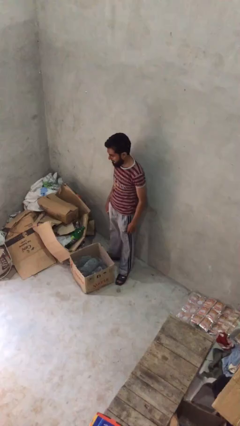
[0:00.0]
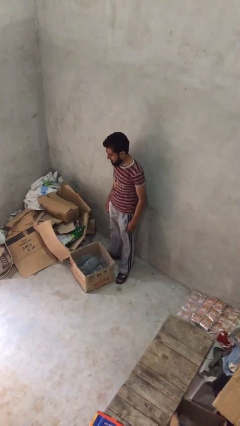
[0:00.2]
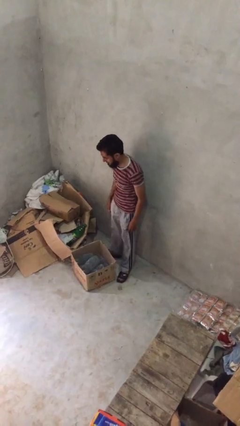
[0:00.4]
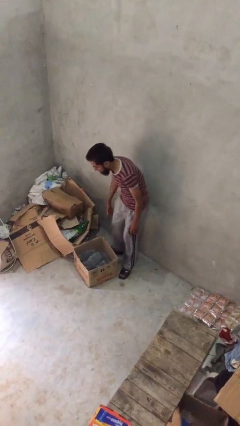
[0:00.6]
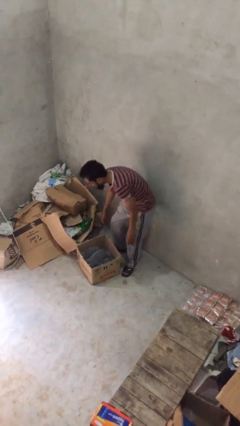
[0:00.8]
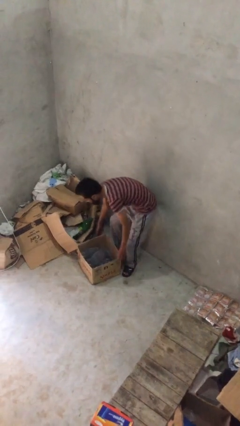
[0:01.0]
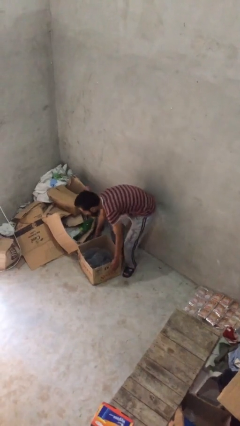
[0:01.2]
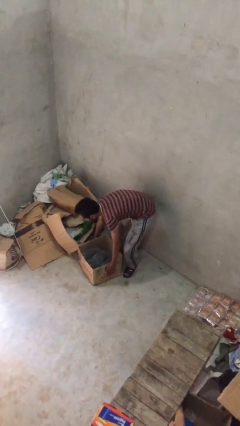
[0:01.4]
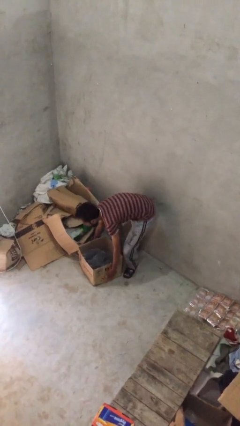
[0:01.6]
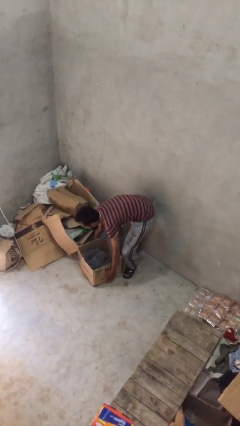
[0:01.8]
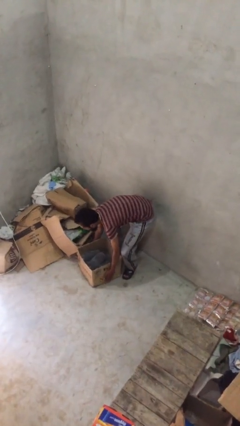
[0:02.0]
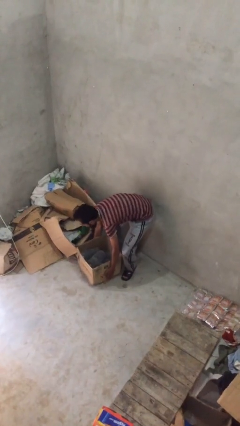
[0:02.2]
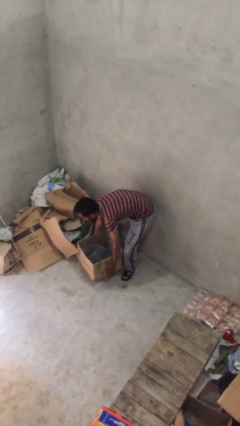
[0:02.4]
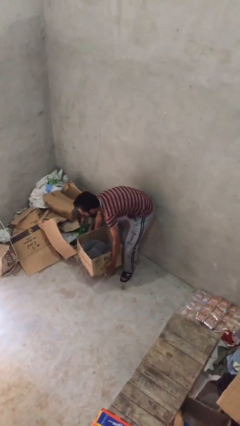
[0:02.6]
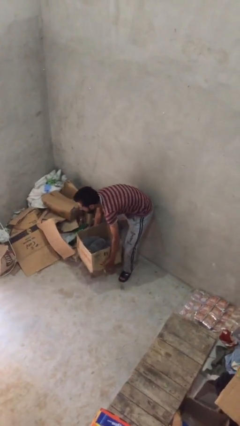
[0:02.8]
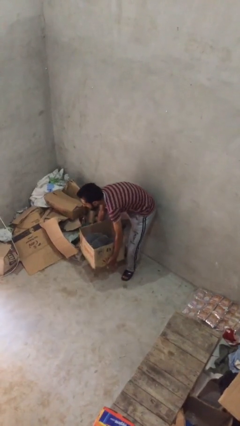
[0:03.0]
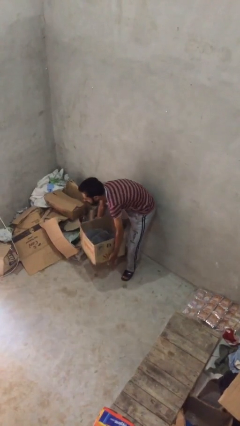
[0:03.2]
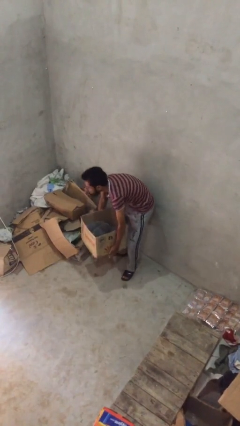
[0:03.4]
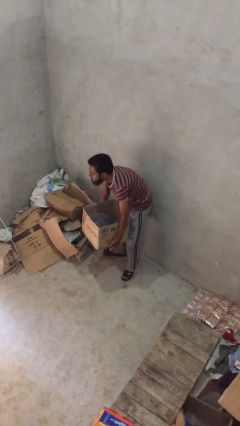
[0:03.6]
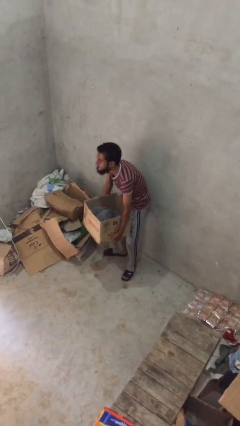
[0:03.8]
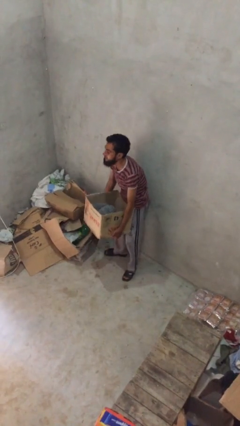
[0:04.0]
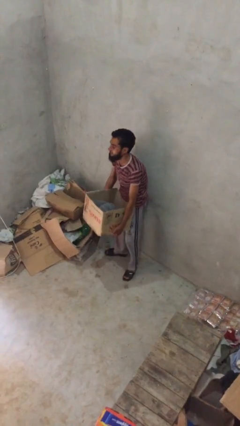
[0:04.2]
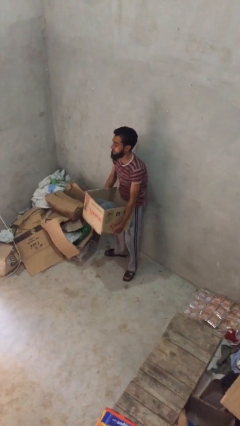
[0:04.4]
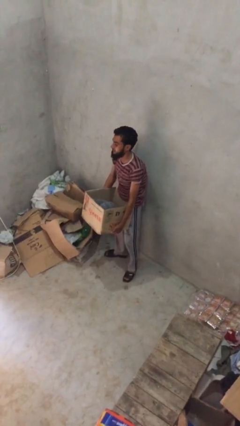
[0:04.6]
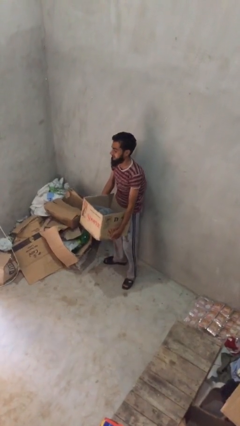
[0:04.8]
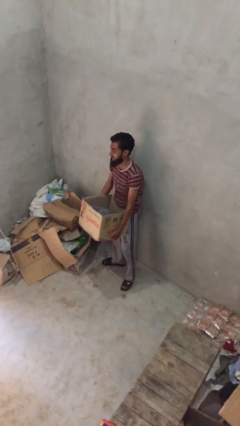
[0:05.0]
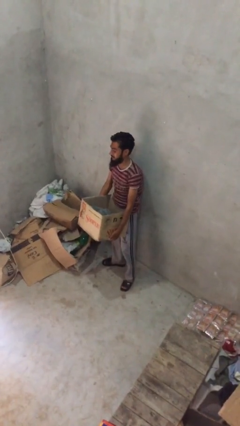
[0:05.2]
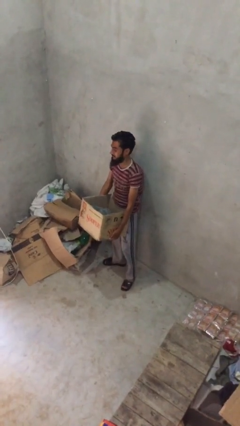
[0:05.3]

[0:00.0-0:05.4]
person picks up object from floor

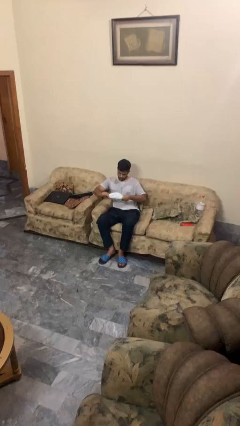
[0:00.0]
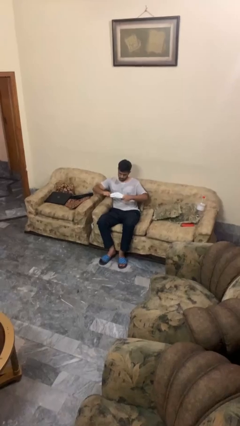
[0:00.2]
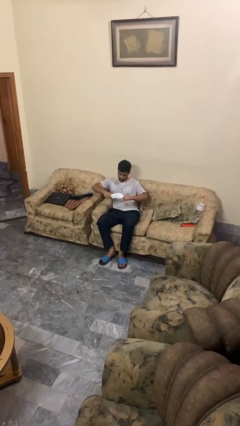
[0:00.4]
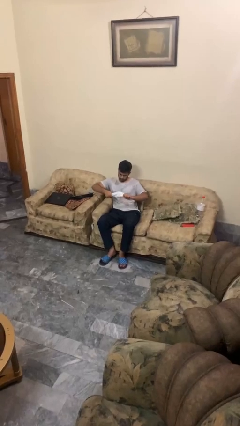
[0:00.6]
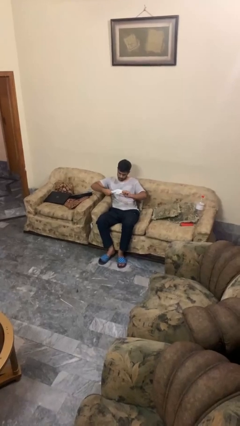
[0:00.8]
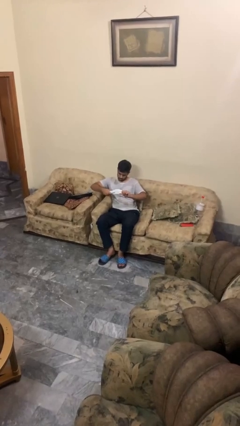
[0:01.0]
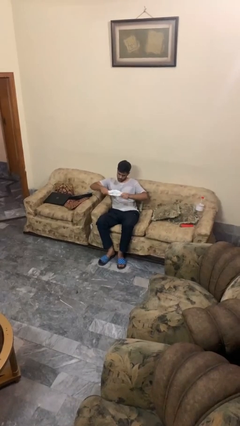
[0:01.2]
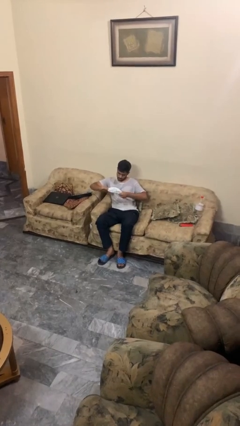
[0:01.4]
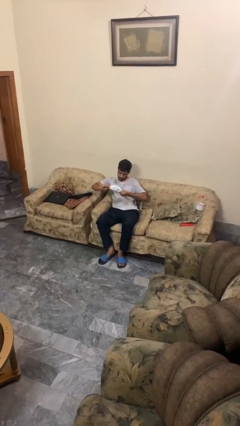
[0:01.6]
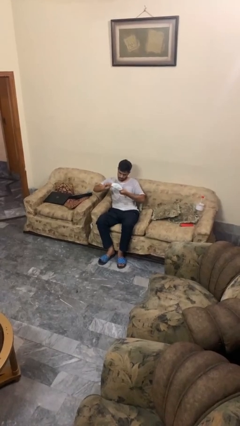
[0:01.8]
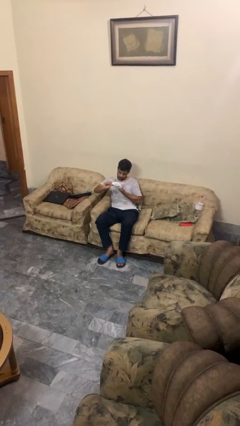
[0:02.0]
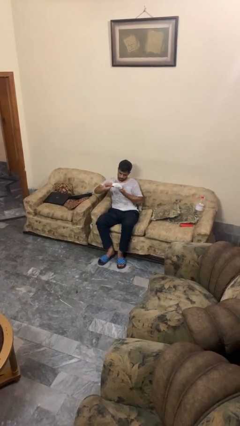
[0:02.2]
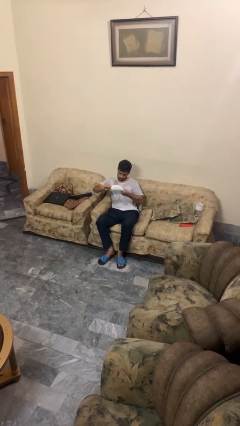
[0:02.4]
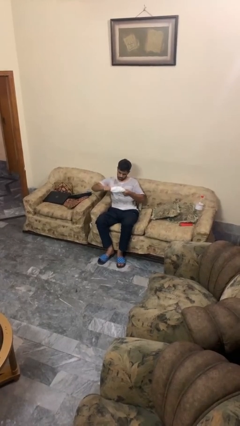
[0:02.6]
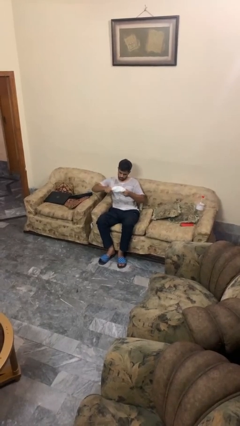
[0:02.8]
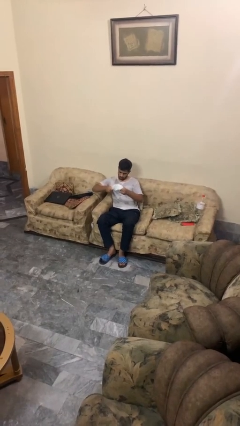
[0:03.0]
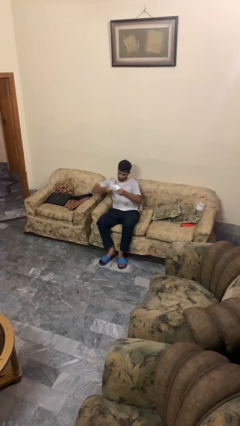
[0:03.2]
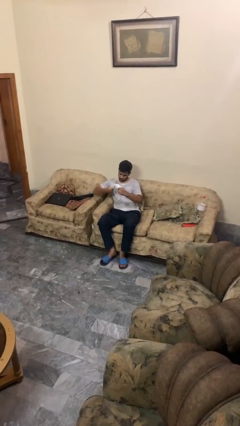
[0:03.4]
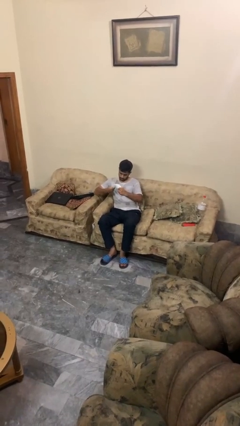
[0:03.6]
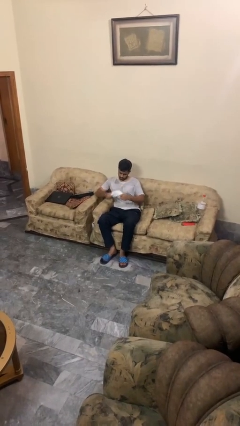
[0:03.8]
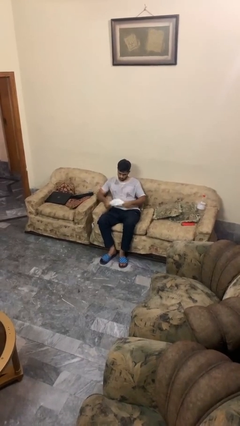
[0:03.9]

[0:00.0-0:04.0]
person squeezes object

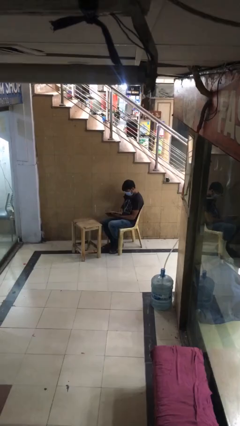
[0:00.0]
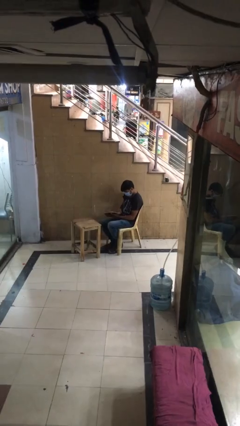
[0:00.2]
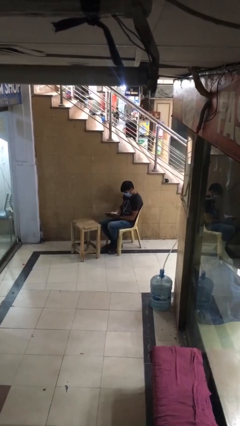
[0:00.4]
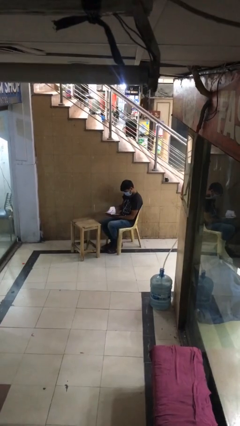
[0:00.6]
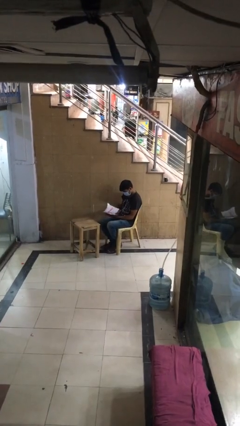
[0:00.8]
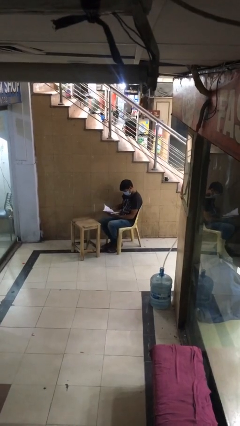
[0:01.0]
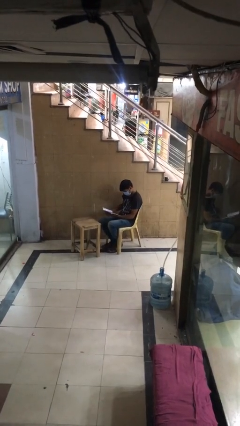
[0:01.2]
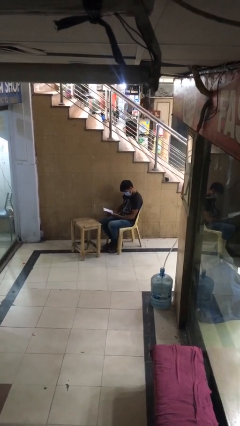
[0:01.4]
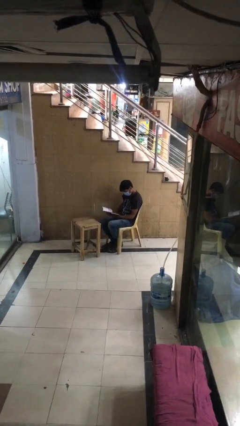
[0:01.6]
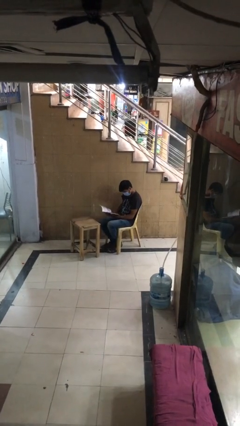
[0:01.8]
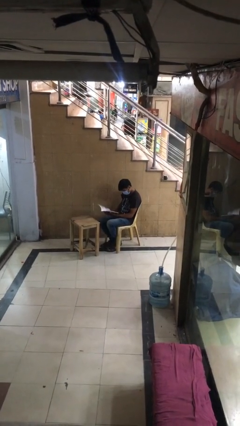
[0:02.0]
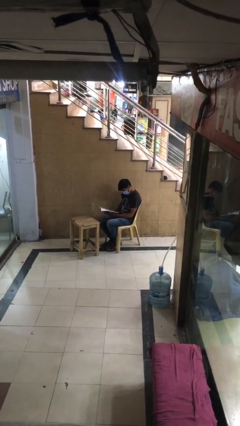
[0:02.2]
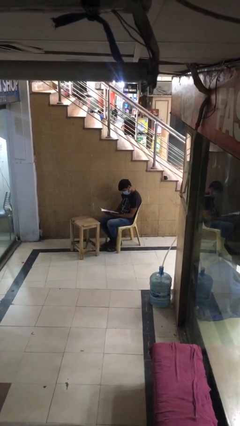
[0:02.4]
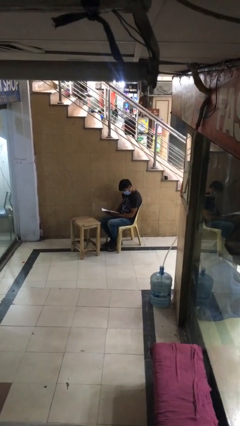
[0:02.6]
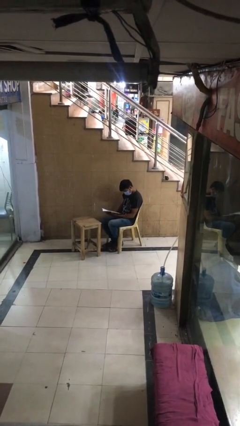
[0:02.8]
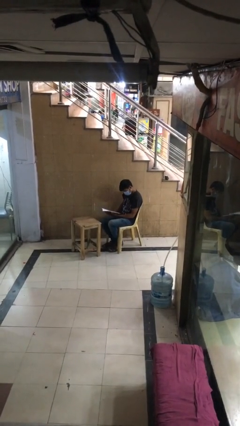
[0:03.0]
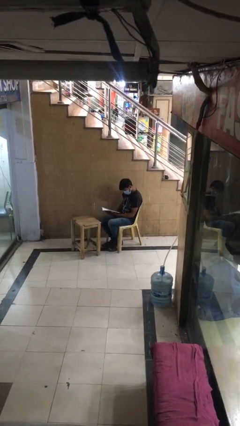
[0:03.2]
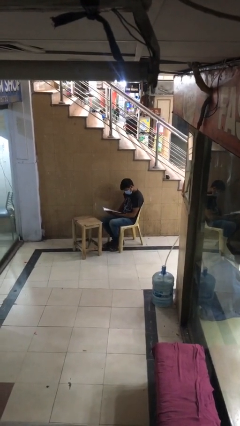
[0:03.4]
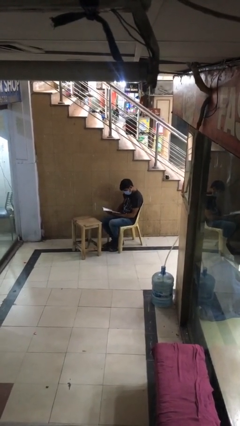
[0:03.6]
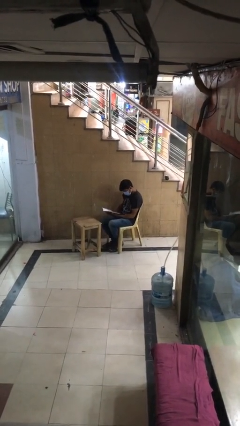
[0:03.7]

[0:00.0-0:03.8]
person reads document

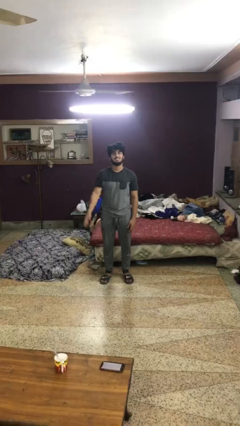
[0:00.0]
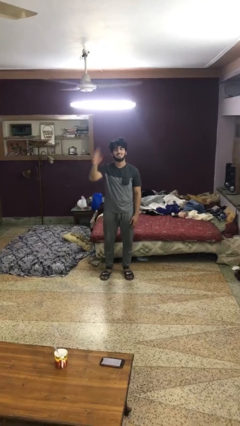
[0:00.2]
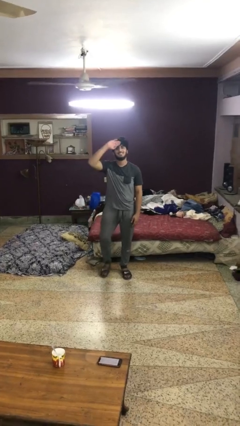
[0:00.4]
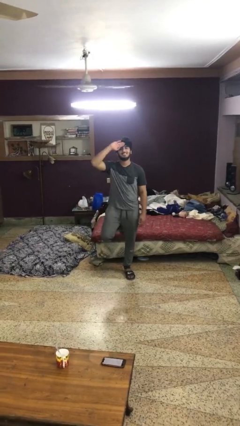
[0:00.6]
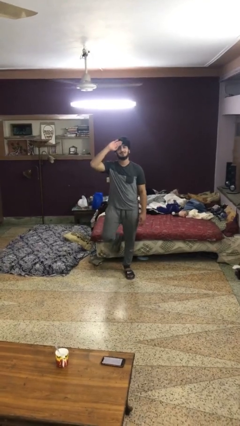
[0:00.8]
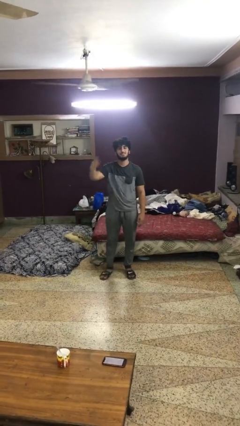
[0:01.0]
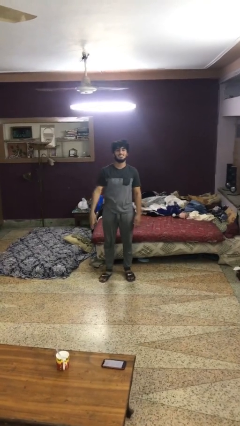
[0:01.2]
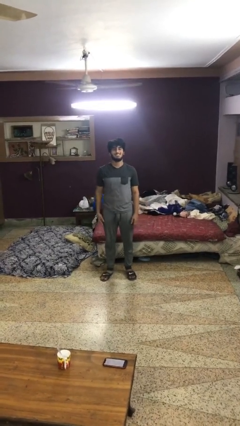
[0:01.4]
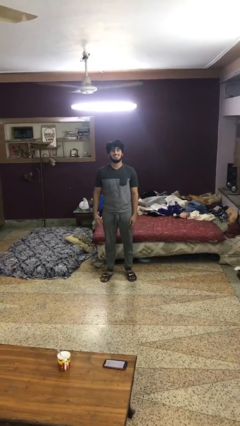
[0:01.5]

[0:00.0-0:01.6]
person salutes

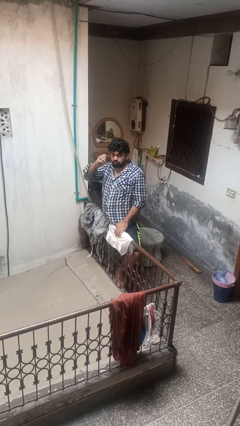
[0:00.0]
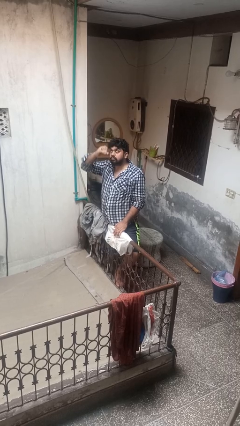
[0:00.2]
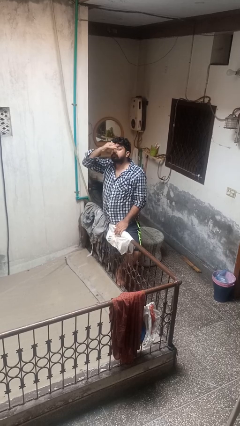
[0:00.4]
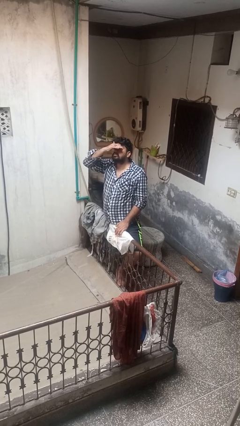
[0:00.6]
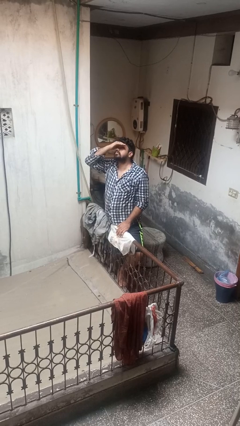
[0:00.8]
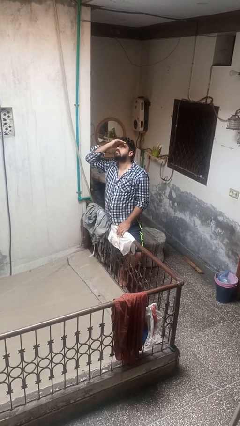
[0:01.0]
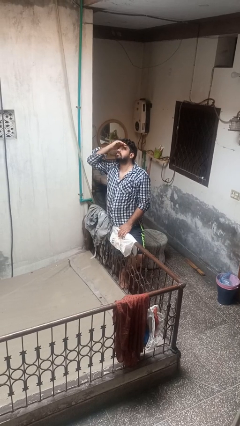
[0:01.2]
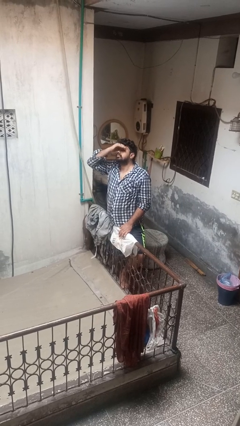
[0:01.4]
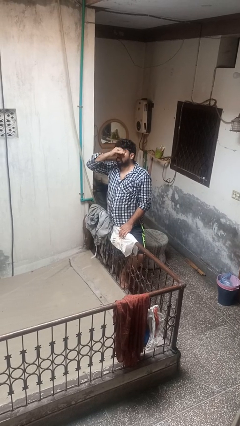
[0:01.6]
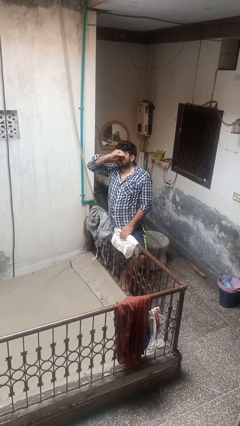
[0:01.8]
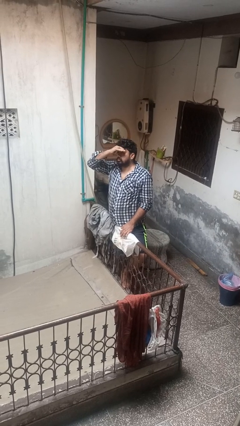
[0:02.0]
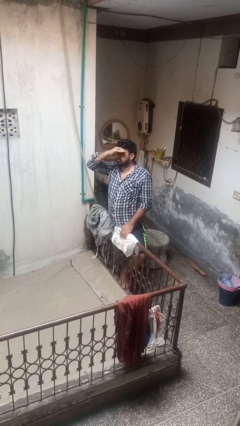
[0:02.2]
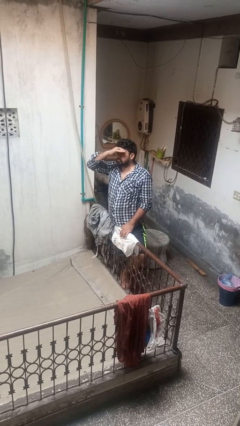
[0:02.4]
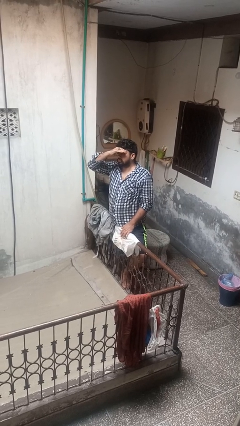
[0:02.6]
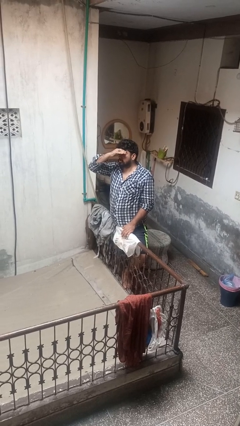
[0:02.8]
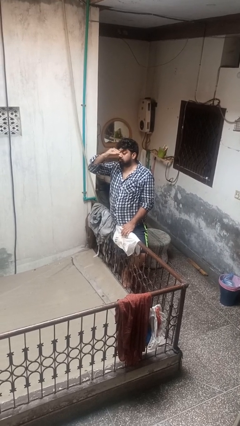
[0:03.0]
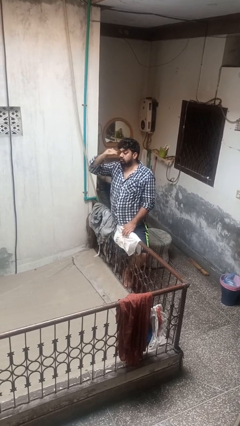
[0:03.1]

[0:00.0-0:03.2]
person shades eyes
